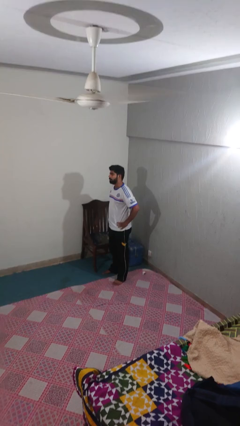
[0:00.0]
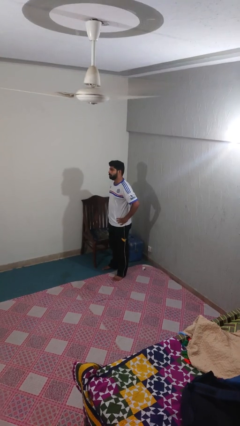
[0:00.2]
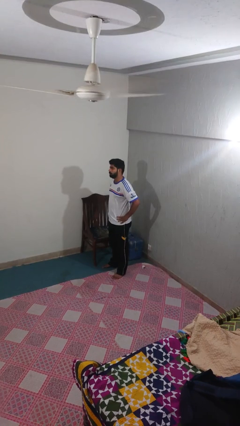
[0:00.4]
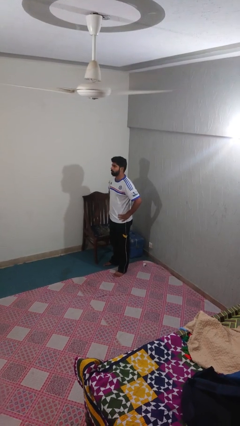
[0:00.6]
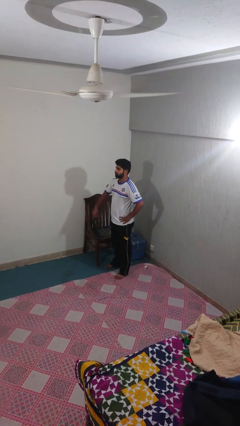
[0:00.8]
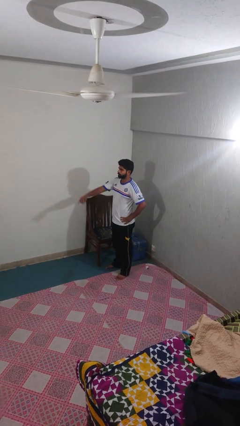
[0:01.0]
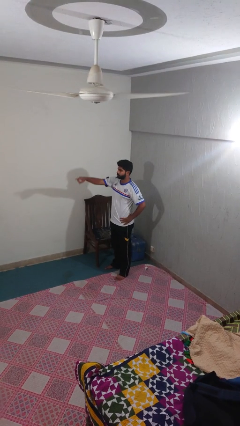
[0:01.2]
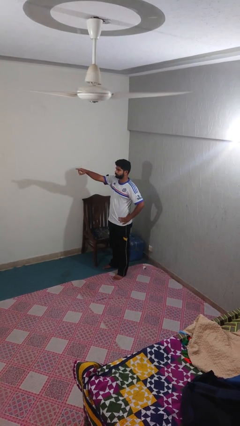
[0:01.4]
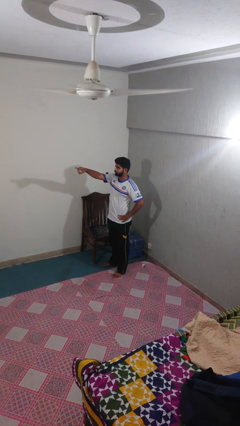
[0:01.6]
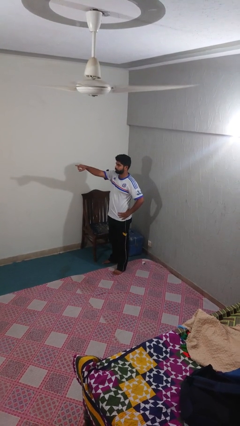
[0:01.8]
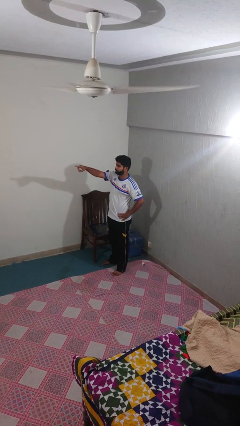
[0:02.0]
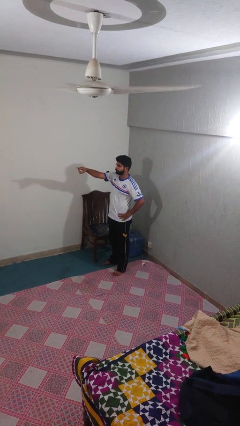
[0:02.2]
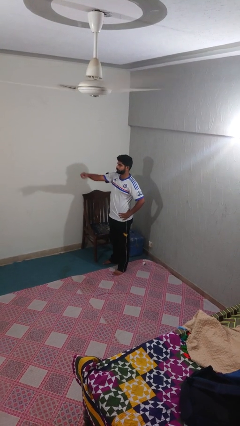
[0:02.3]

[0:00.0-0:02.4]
person points at person

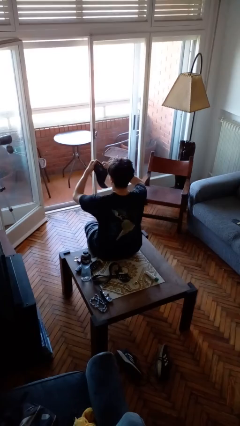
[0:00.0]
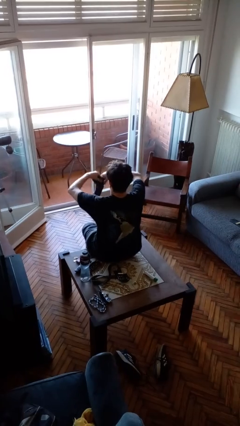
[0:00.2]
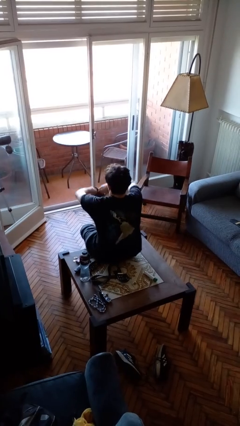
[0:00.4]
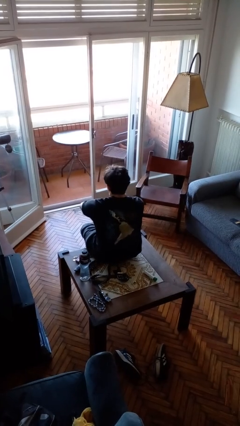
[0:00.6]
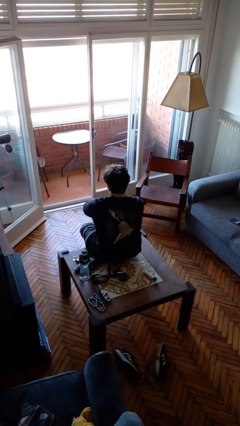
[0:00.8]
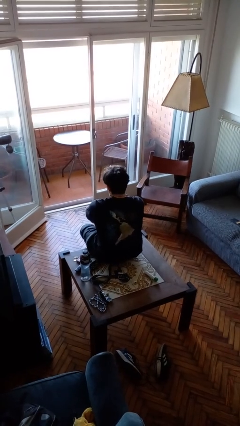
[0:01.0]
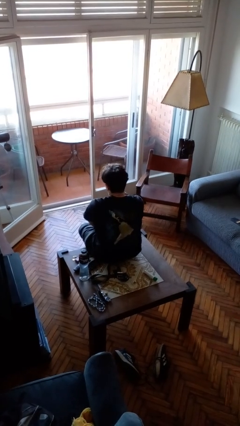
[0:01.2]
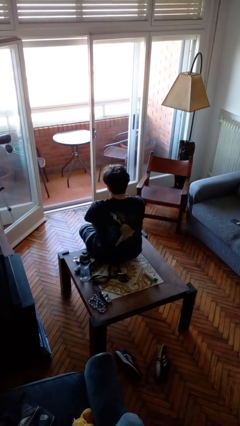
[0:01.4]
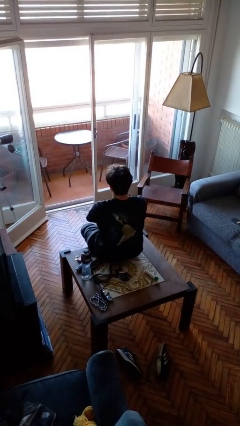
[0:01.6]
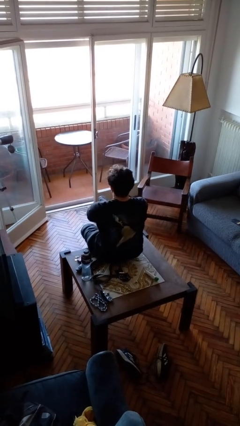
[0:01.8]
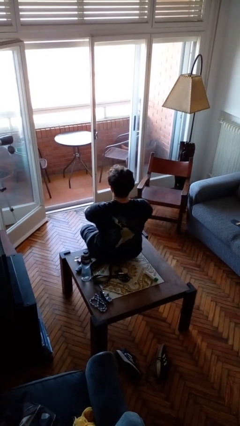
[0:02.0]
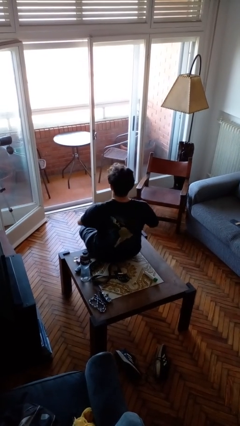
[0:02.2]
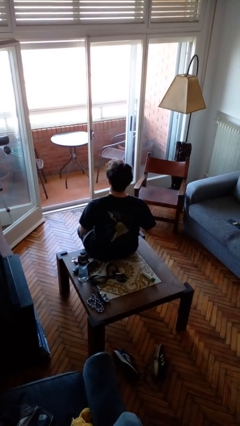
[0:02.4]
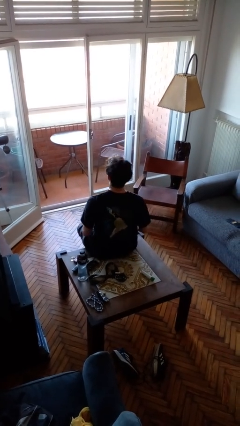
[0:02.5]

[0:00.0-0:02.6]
person puts on socks

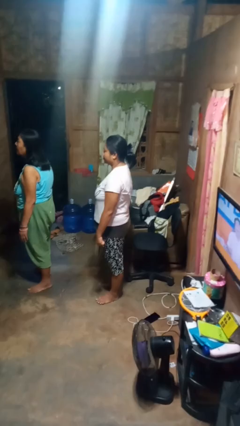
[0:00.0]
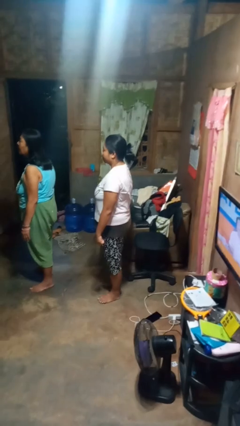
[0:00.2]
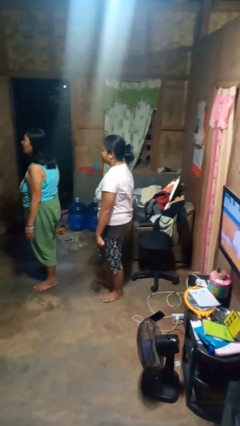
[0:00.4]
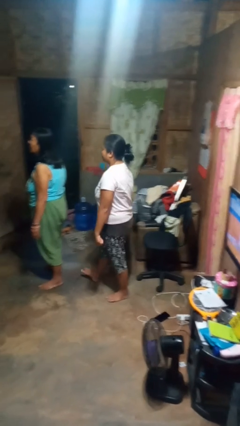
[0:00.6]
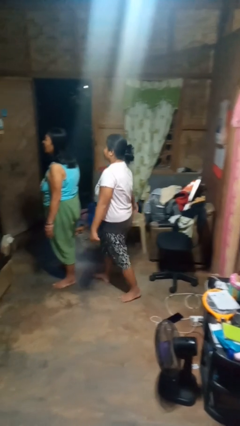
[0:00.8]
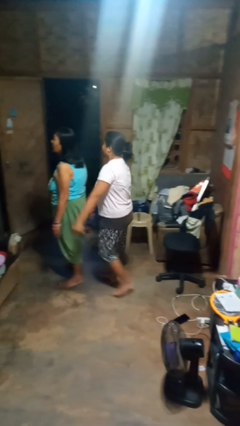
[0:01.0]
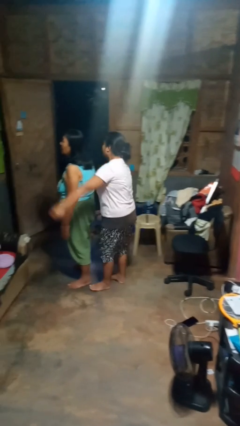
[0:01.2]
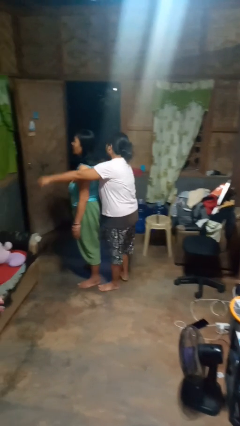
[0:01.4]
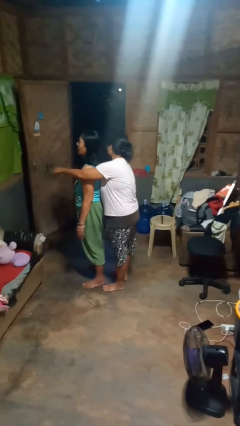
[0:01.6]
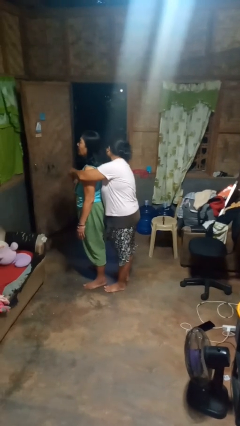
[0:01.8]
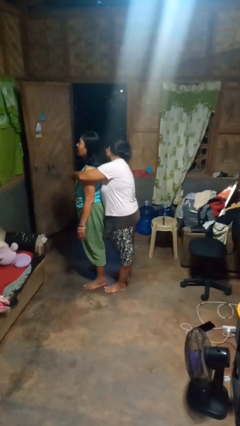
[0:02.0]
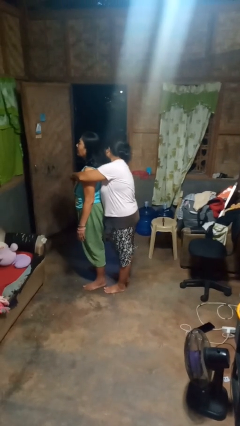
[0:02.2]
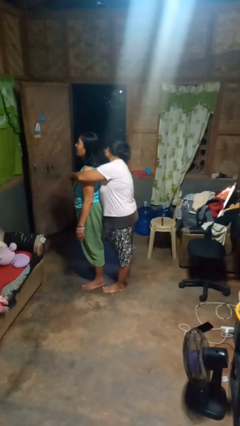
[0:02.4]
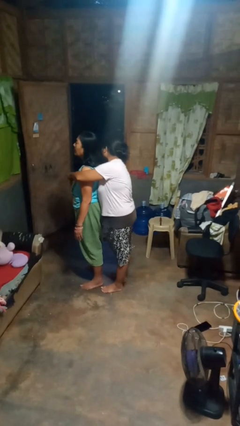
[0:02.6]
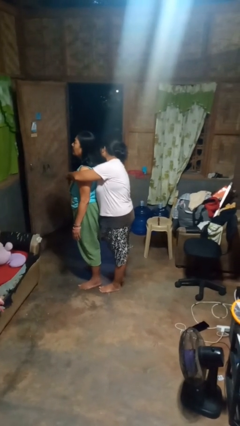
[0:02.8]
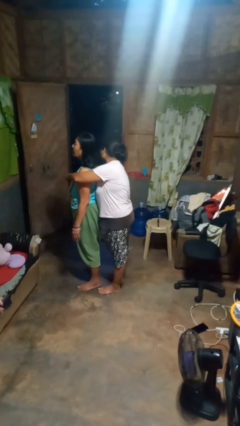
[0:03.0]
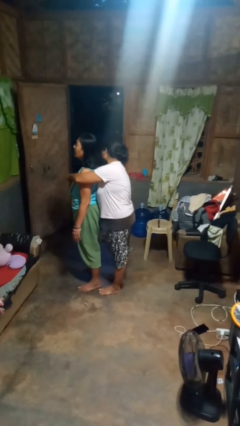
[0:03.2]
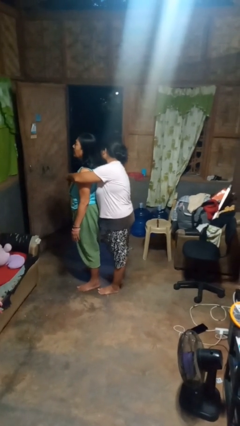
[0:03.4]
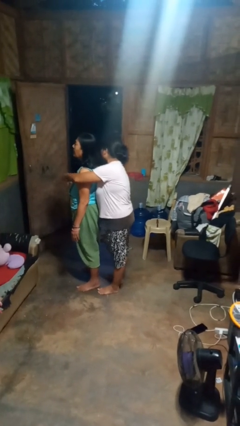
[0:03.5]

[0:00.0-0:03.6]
person hugs person from behind

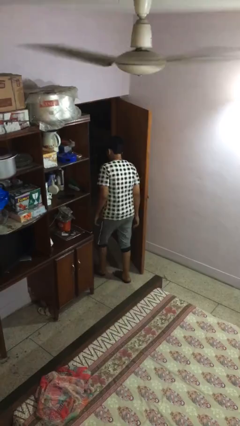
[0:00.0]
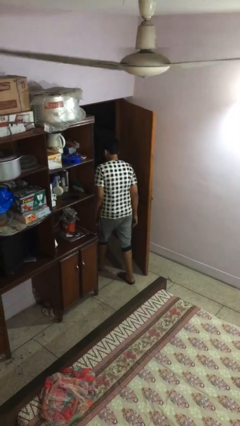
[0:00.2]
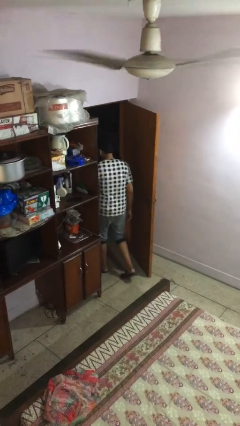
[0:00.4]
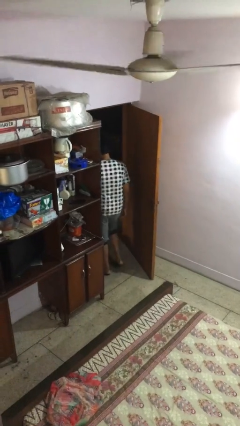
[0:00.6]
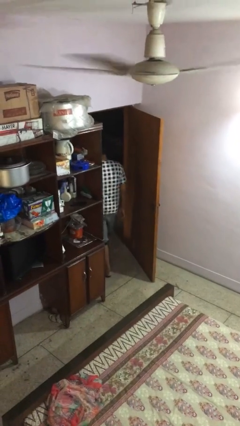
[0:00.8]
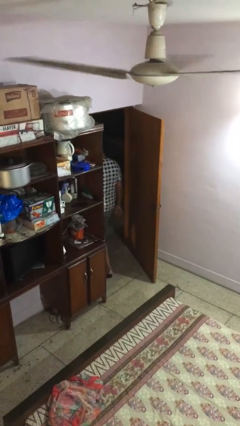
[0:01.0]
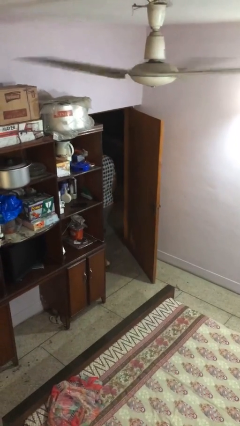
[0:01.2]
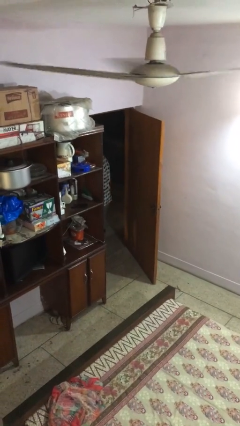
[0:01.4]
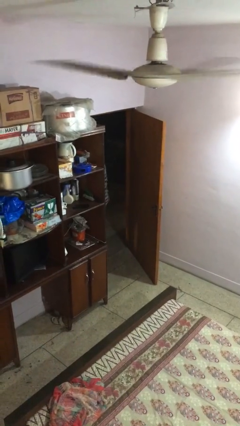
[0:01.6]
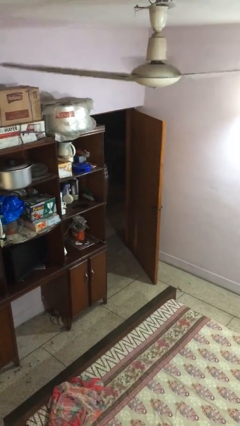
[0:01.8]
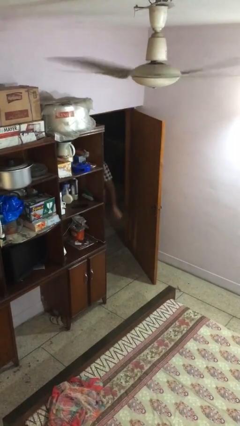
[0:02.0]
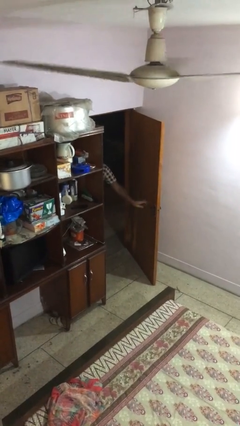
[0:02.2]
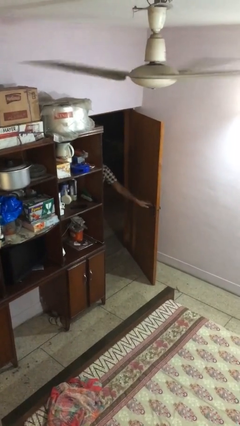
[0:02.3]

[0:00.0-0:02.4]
person exits scene through structure

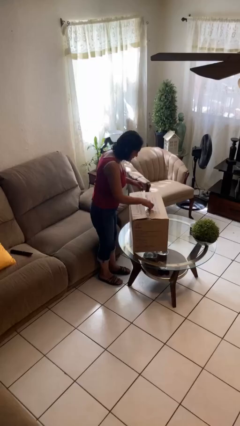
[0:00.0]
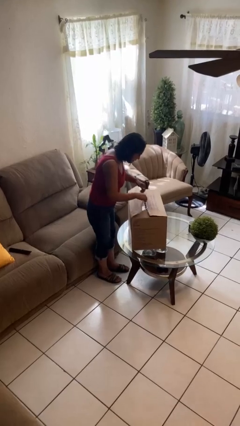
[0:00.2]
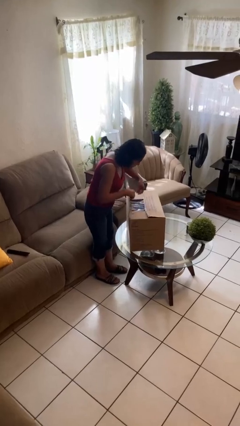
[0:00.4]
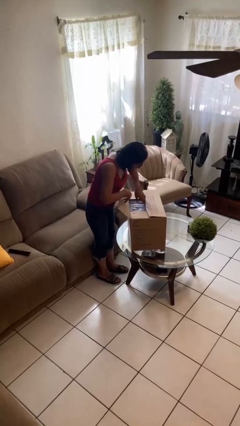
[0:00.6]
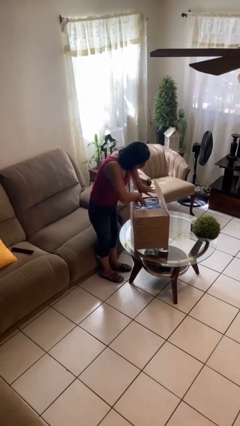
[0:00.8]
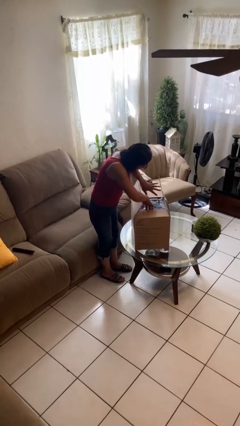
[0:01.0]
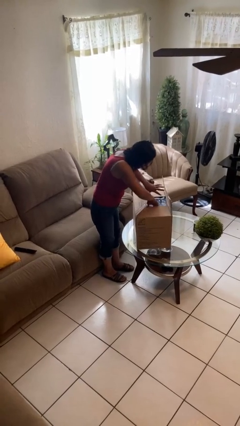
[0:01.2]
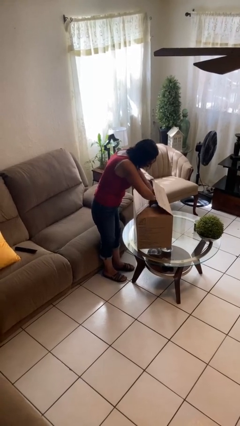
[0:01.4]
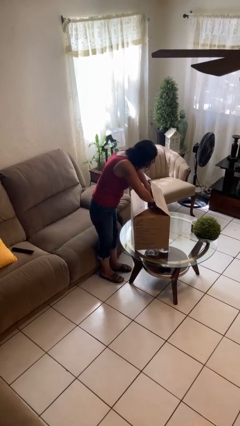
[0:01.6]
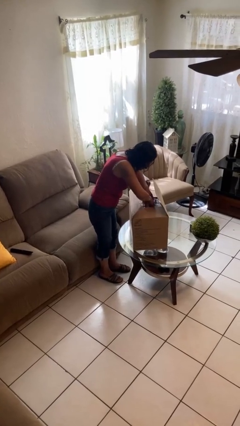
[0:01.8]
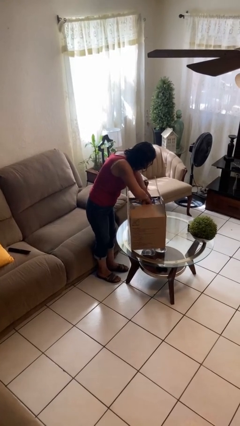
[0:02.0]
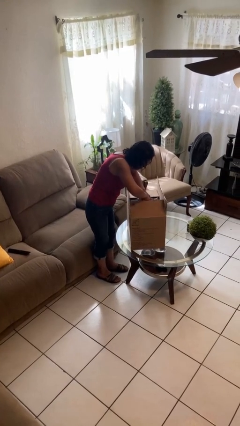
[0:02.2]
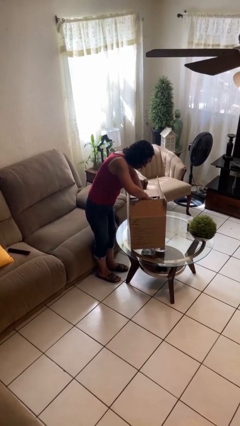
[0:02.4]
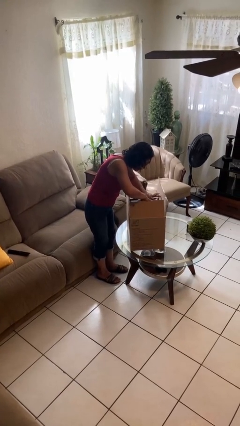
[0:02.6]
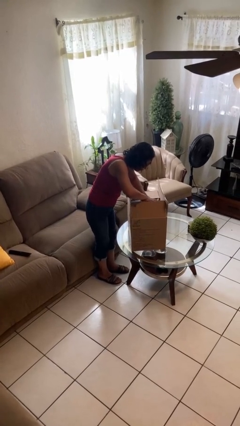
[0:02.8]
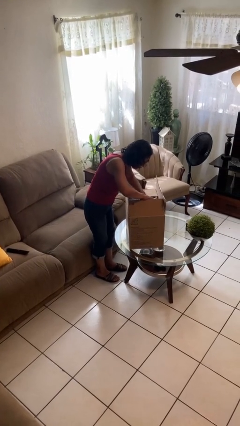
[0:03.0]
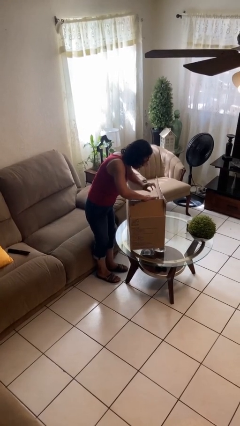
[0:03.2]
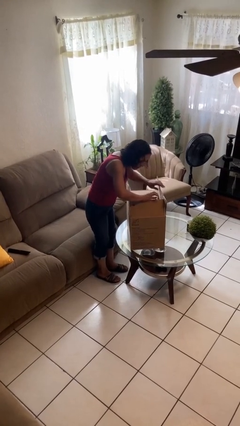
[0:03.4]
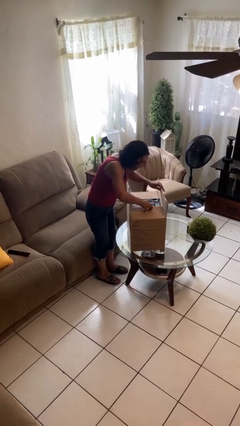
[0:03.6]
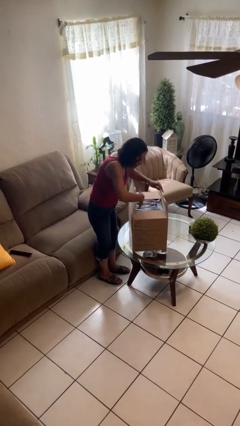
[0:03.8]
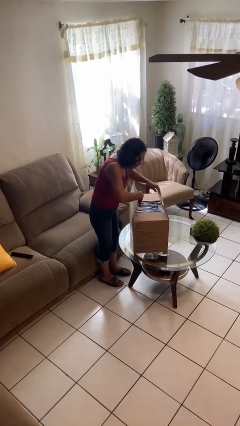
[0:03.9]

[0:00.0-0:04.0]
person searches in box

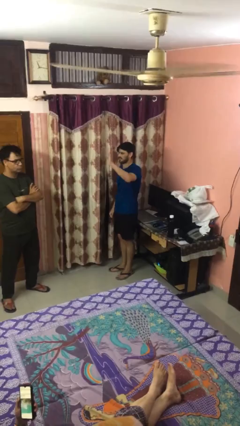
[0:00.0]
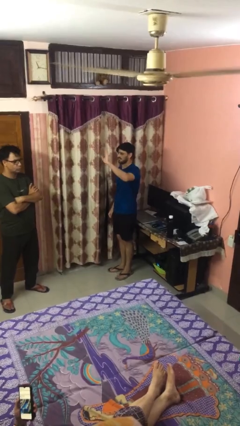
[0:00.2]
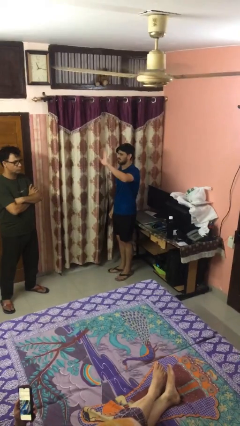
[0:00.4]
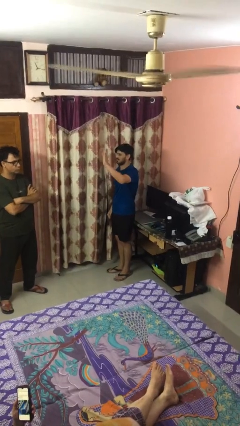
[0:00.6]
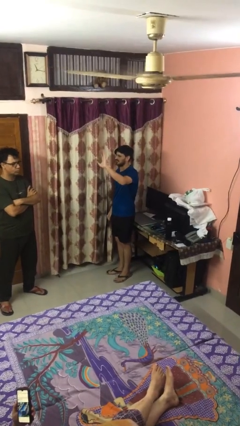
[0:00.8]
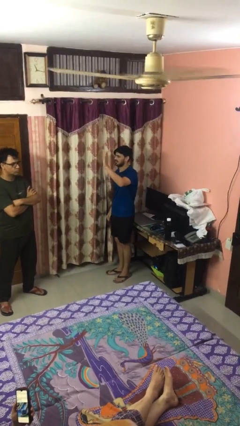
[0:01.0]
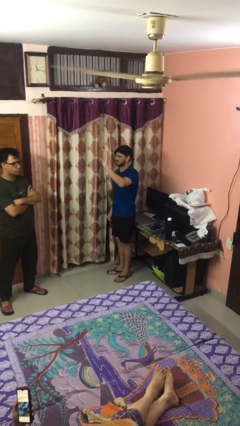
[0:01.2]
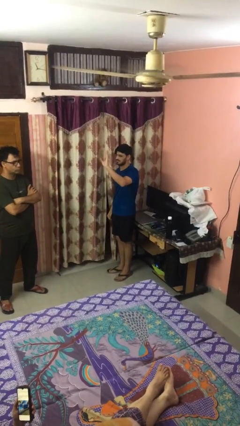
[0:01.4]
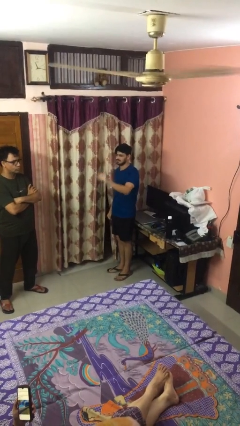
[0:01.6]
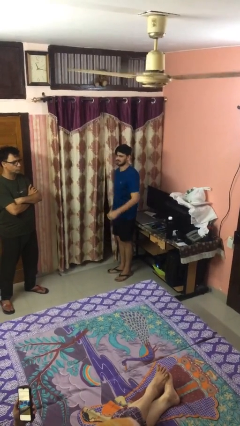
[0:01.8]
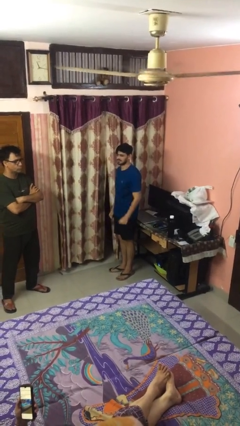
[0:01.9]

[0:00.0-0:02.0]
person waves at person

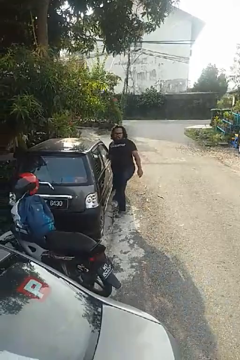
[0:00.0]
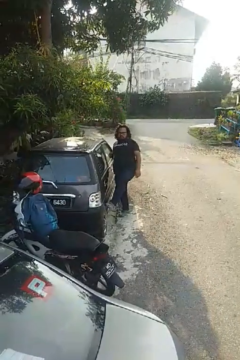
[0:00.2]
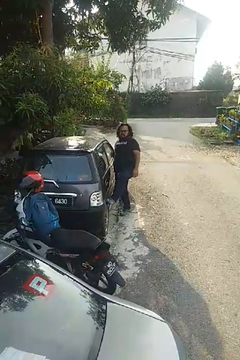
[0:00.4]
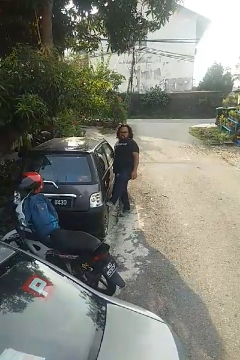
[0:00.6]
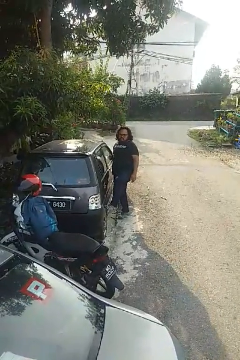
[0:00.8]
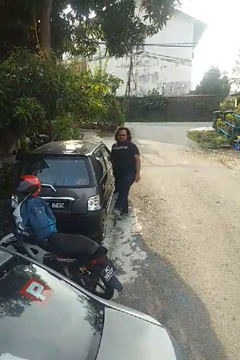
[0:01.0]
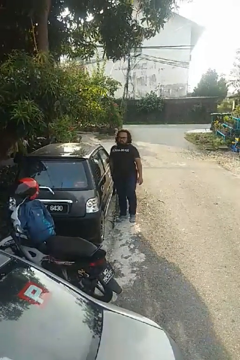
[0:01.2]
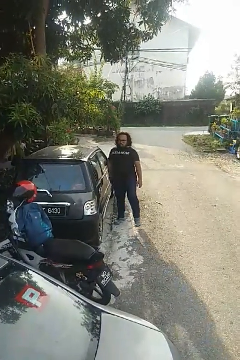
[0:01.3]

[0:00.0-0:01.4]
person kicks car tires
